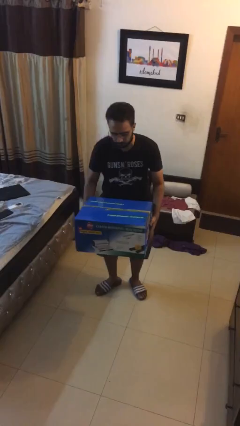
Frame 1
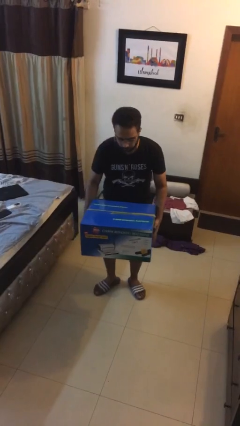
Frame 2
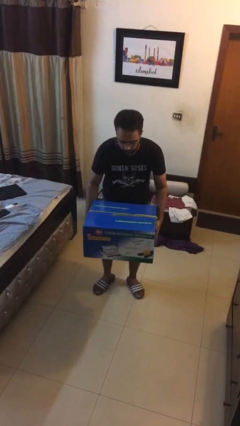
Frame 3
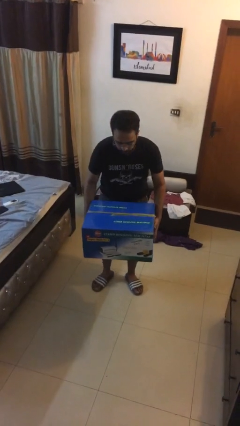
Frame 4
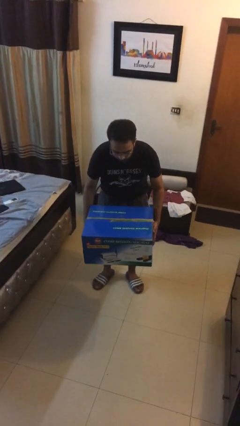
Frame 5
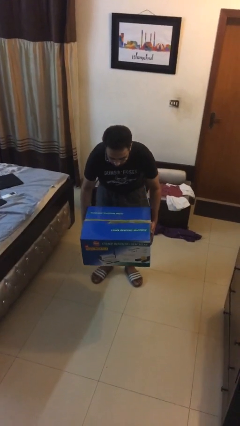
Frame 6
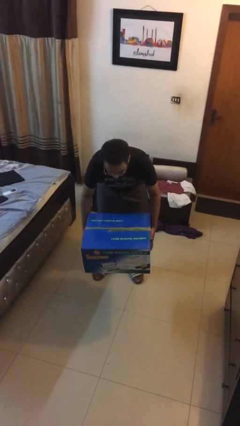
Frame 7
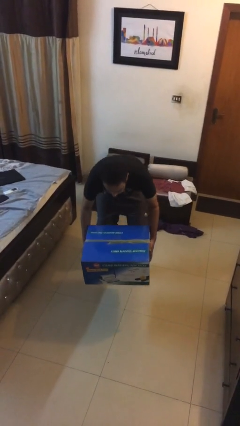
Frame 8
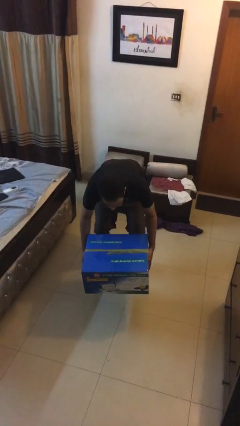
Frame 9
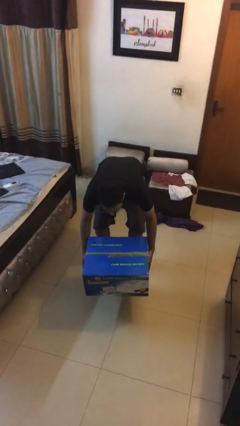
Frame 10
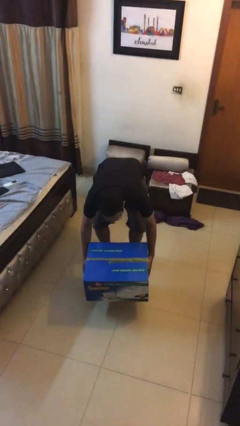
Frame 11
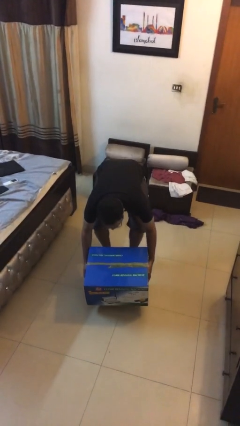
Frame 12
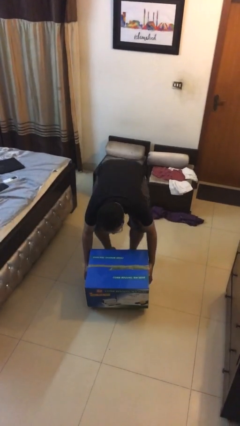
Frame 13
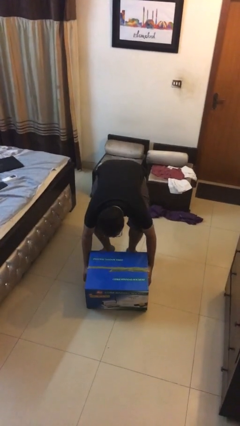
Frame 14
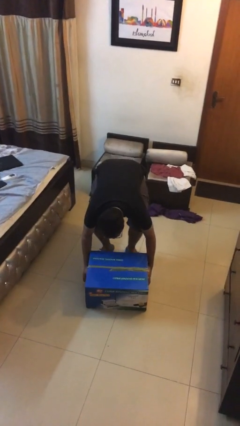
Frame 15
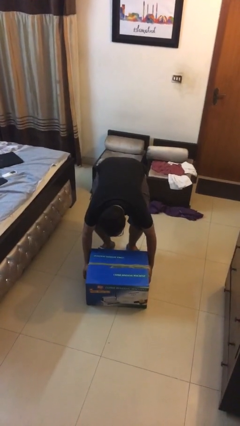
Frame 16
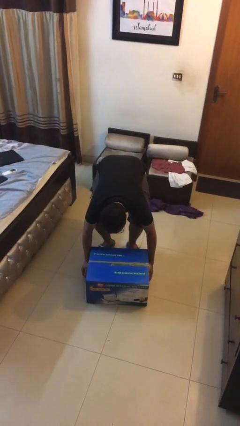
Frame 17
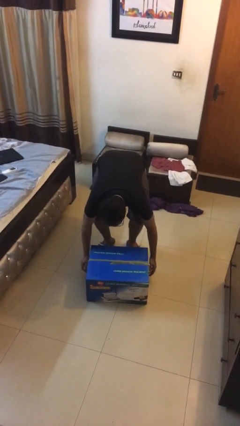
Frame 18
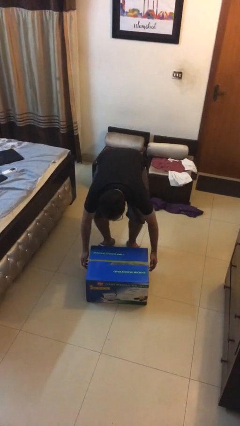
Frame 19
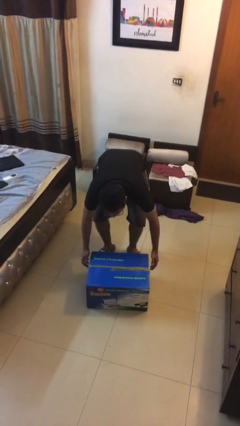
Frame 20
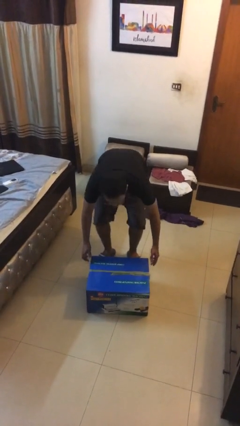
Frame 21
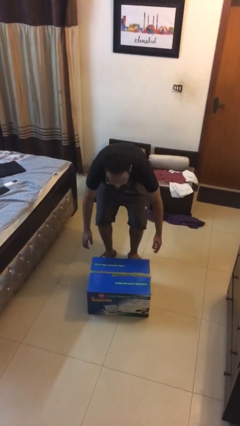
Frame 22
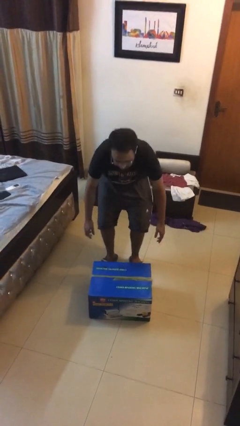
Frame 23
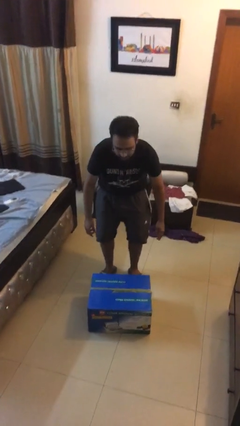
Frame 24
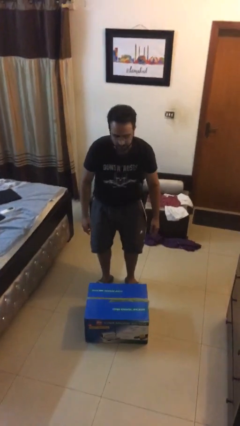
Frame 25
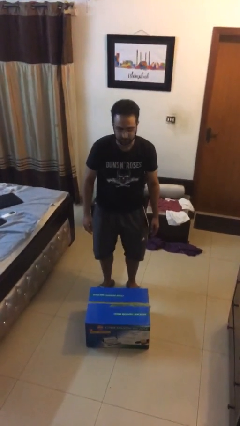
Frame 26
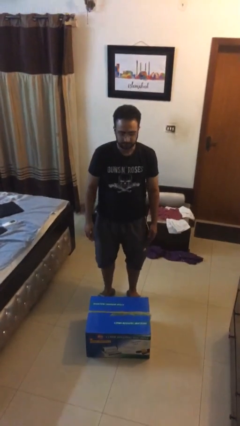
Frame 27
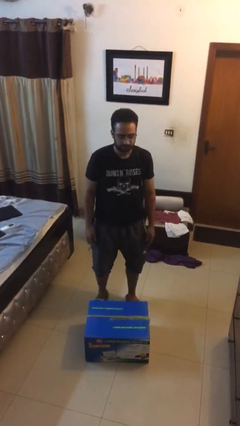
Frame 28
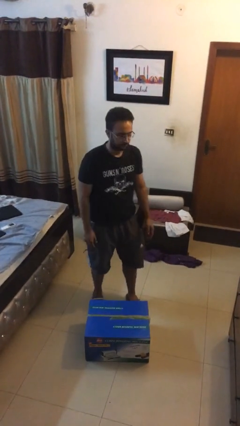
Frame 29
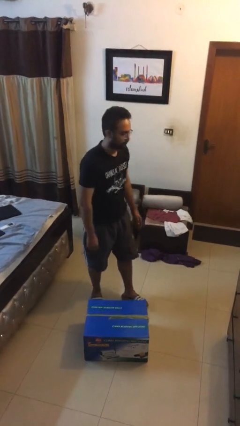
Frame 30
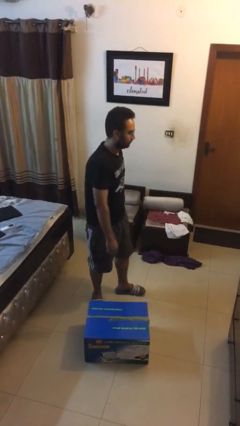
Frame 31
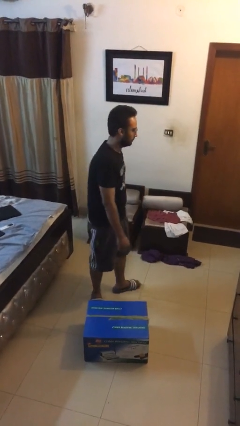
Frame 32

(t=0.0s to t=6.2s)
person puts down object on floor

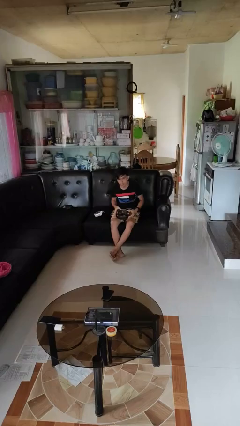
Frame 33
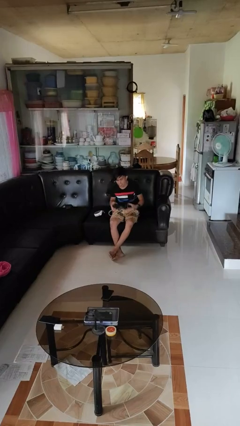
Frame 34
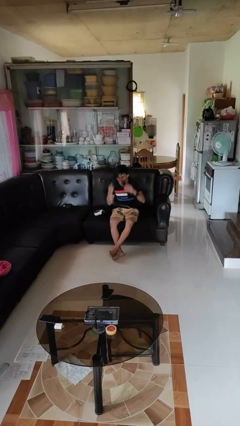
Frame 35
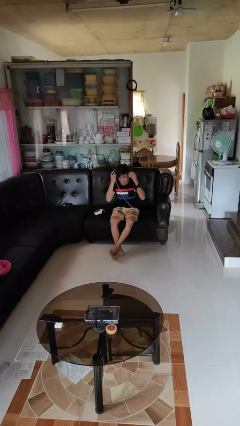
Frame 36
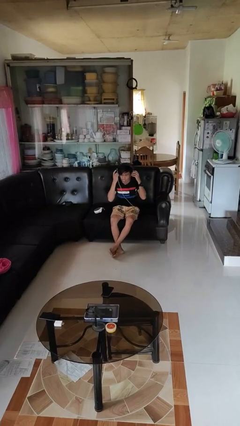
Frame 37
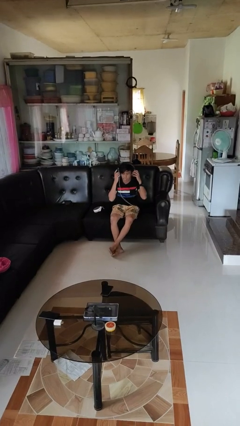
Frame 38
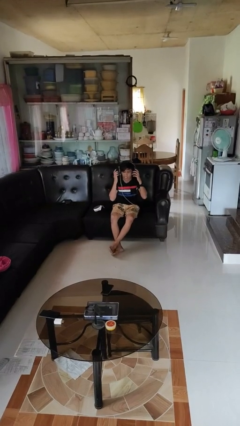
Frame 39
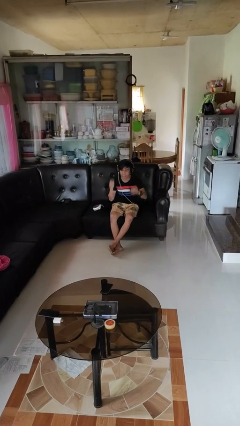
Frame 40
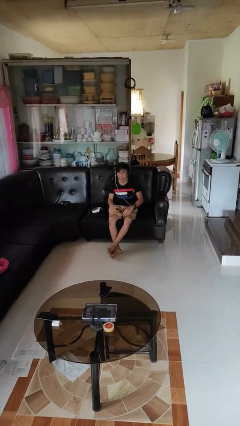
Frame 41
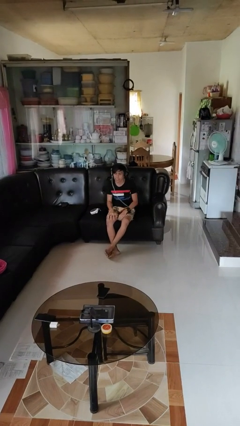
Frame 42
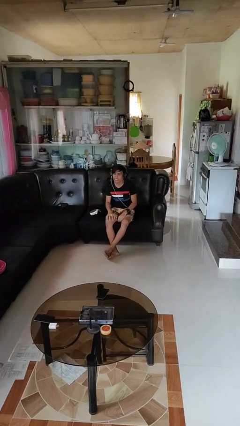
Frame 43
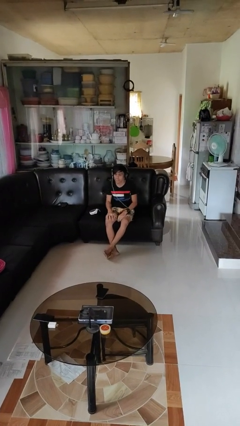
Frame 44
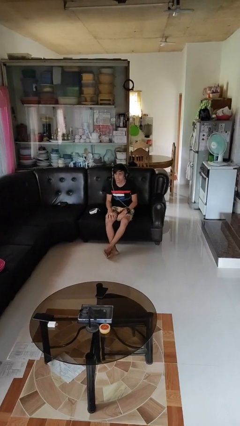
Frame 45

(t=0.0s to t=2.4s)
person puts on headphones

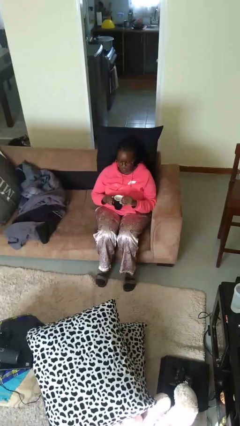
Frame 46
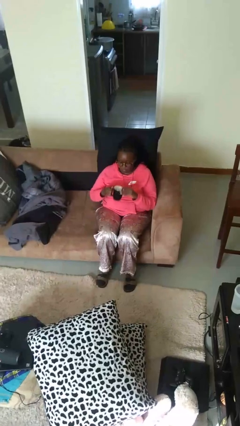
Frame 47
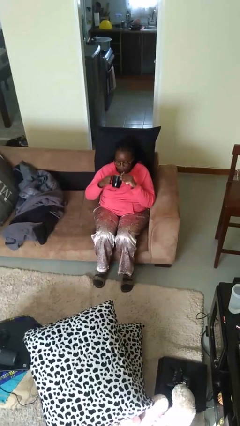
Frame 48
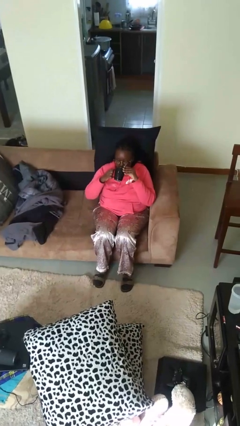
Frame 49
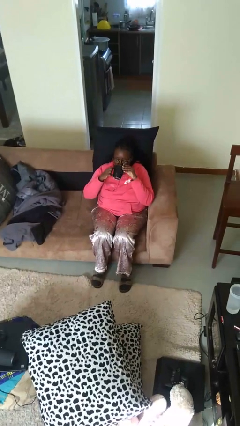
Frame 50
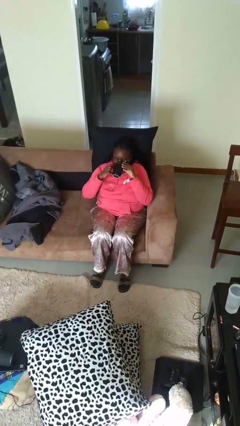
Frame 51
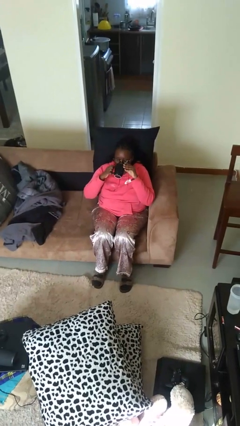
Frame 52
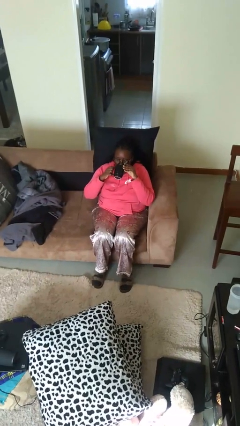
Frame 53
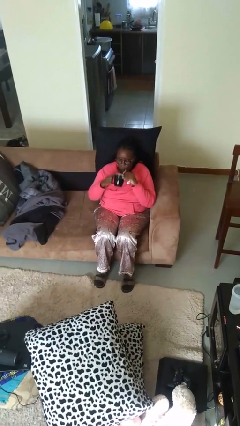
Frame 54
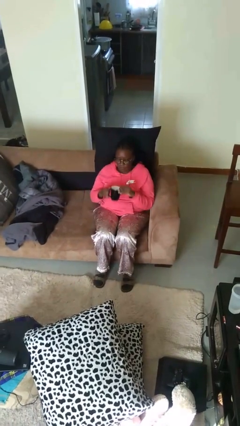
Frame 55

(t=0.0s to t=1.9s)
person drinks from mug

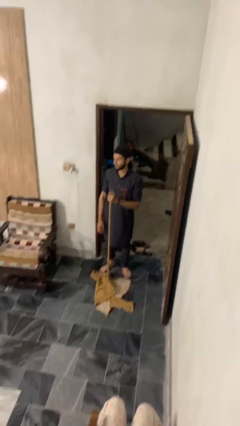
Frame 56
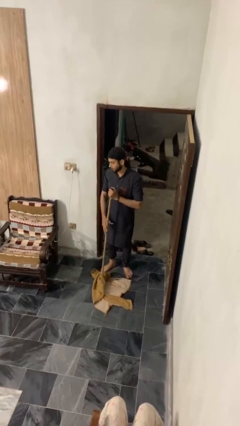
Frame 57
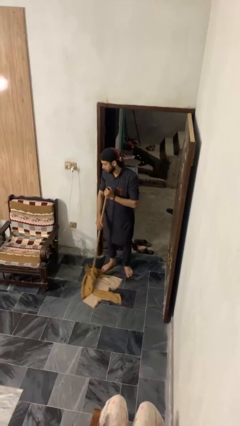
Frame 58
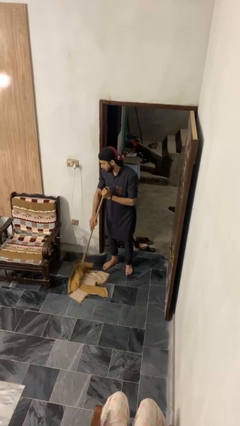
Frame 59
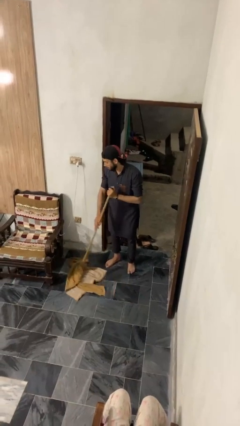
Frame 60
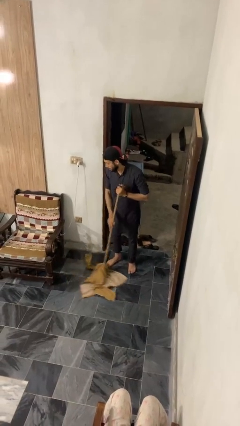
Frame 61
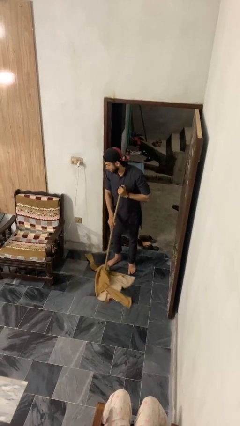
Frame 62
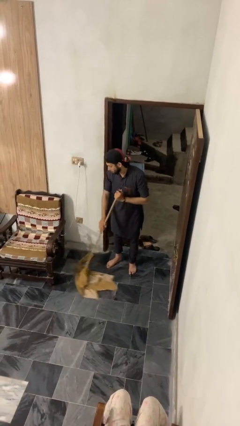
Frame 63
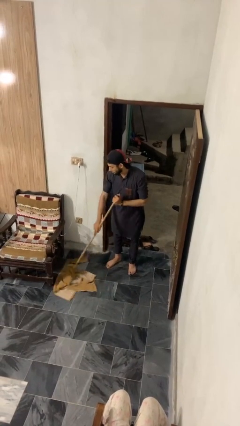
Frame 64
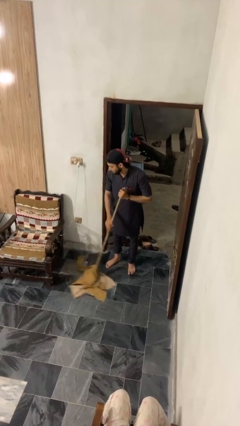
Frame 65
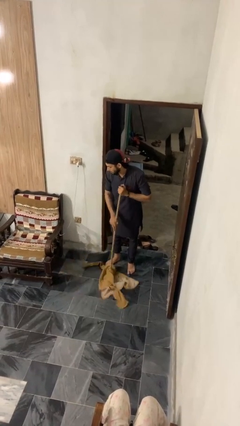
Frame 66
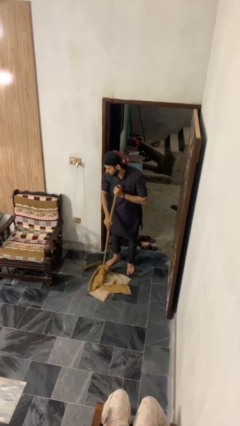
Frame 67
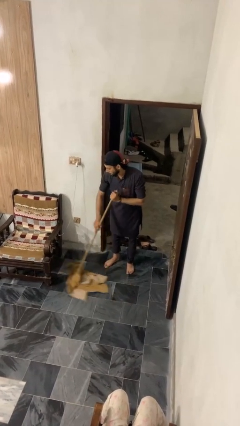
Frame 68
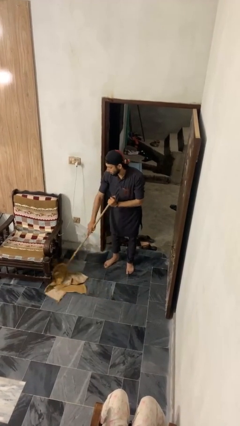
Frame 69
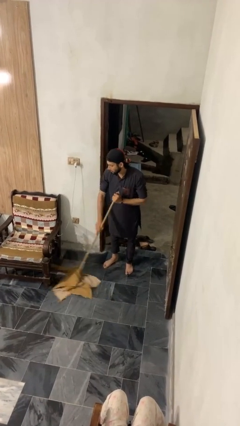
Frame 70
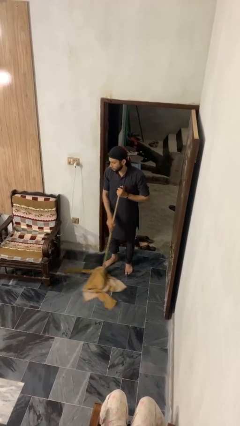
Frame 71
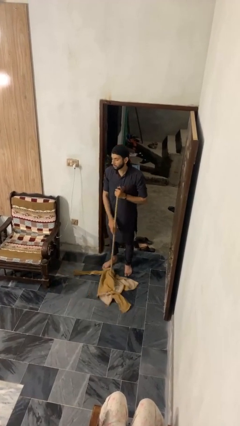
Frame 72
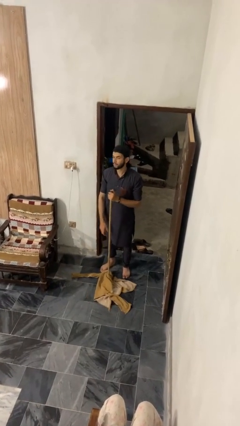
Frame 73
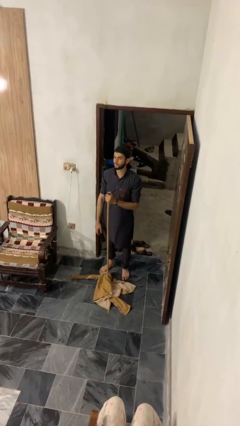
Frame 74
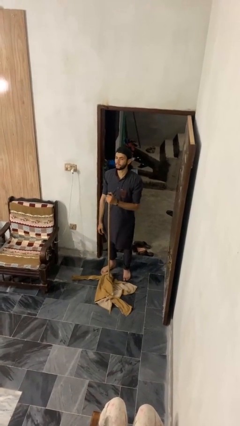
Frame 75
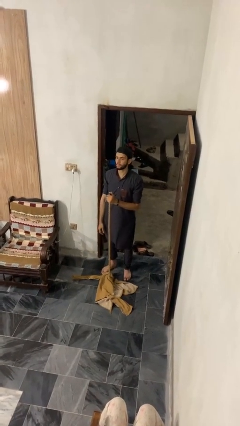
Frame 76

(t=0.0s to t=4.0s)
person mops

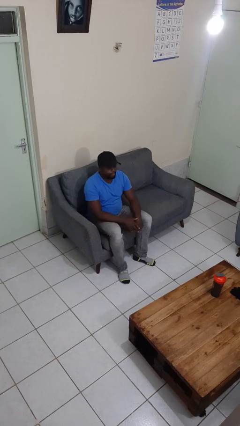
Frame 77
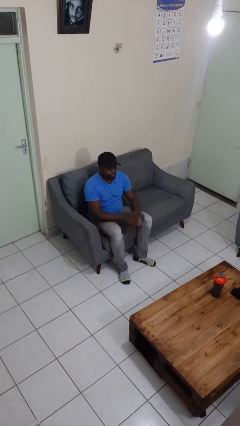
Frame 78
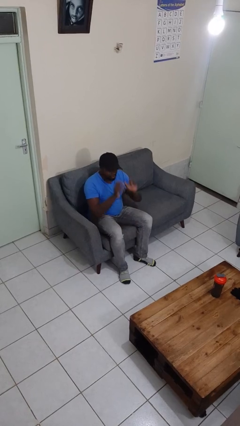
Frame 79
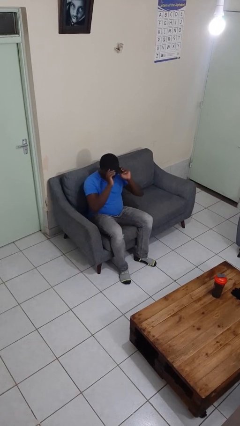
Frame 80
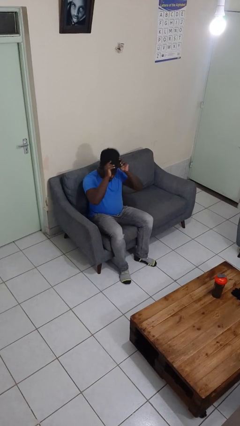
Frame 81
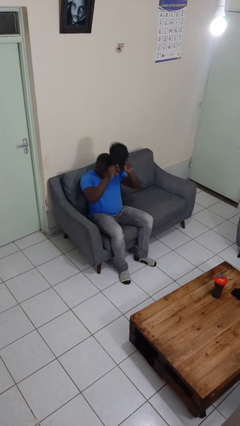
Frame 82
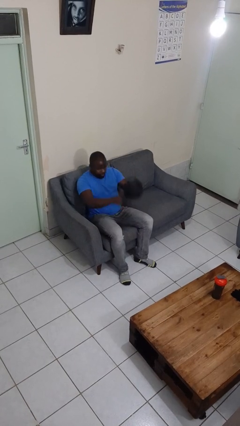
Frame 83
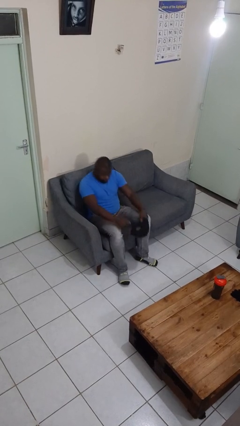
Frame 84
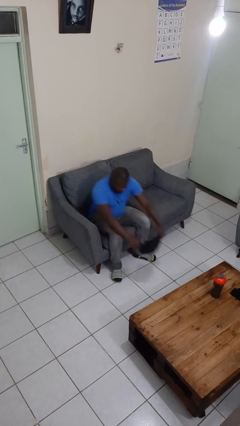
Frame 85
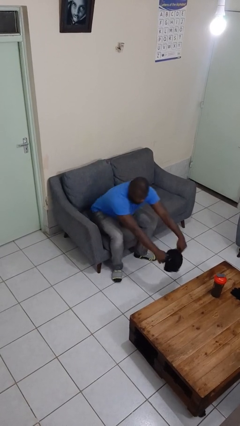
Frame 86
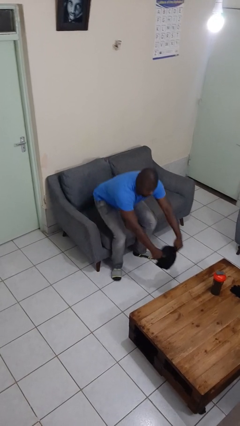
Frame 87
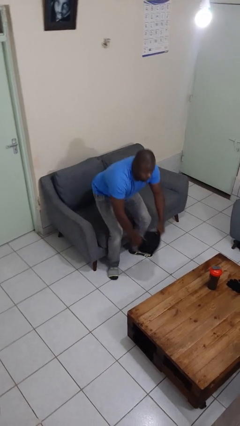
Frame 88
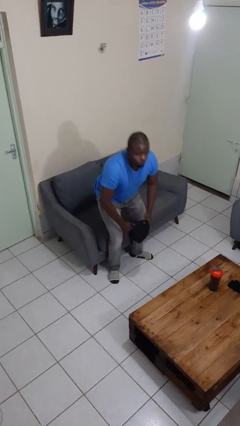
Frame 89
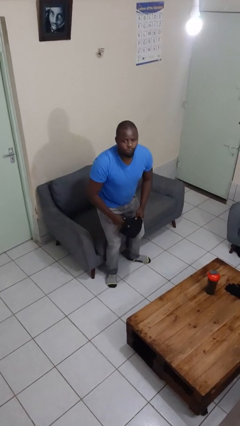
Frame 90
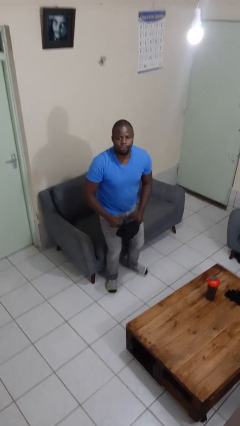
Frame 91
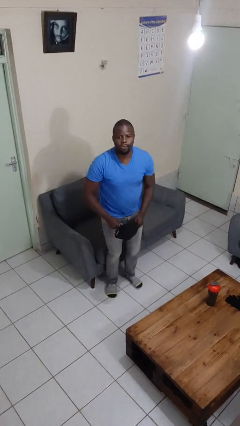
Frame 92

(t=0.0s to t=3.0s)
person takes off hat

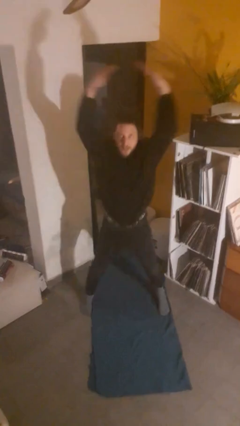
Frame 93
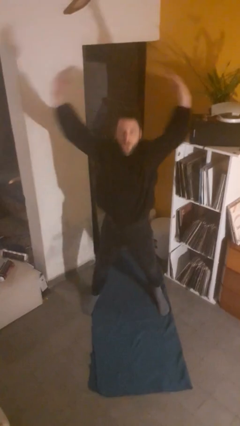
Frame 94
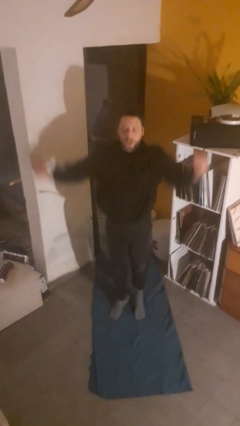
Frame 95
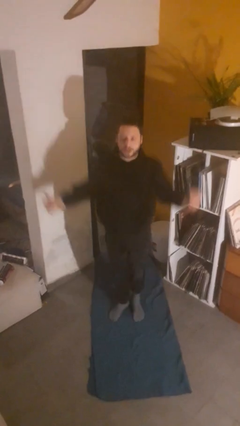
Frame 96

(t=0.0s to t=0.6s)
person exercises with jumping jacks
